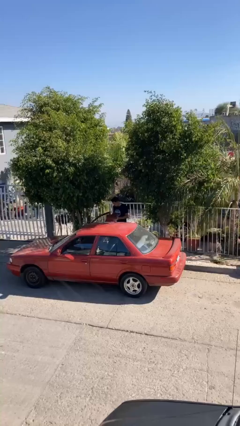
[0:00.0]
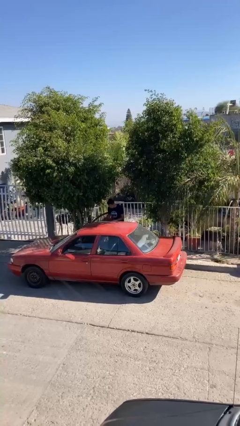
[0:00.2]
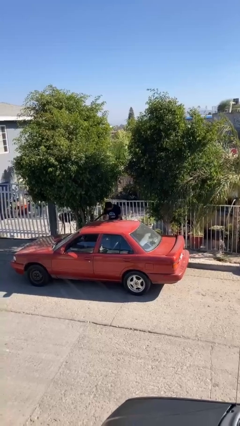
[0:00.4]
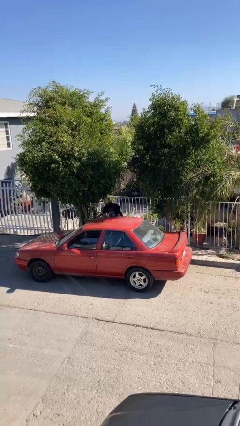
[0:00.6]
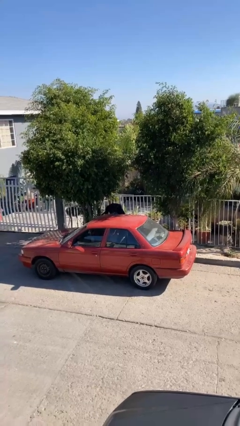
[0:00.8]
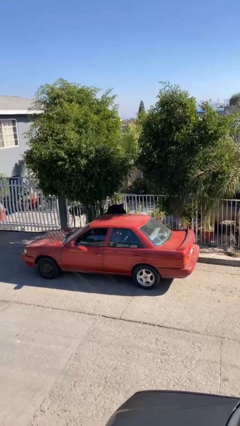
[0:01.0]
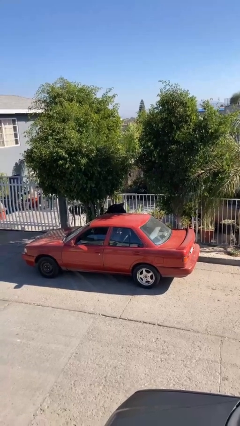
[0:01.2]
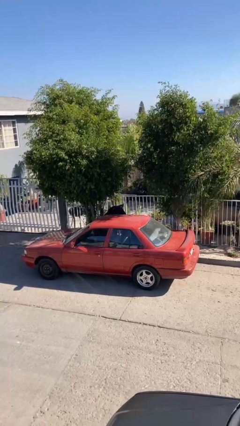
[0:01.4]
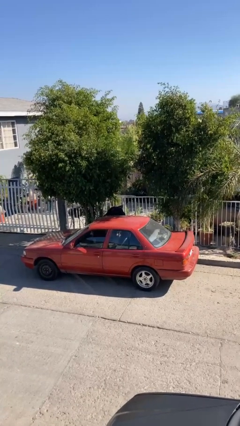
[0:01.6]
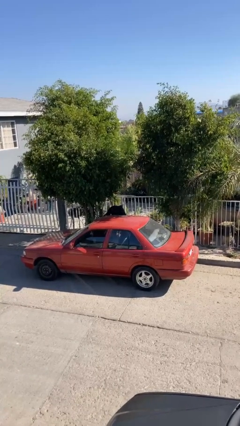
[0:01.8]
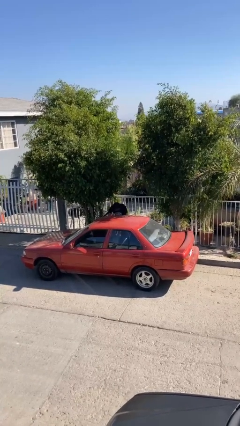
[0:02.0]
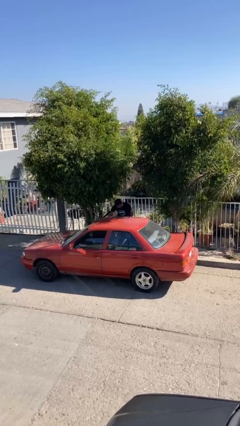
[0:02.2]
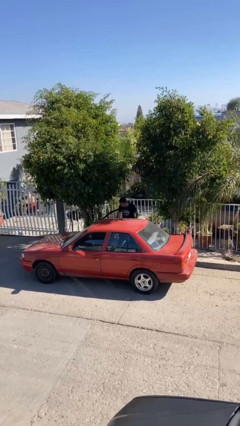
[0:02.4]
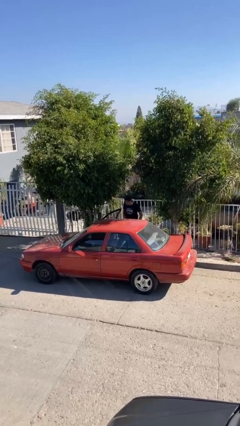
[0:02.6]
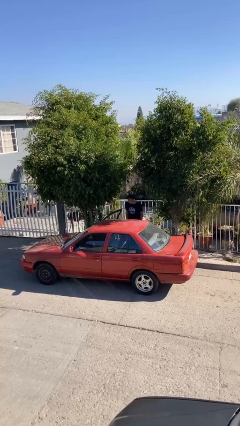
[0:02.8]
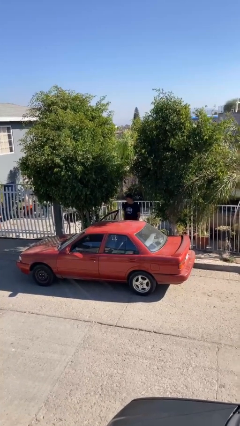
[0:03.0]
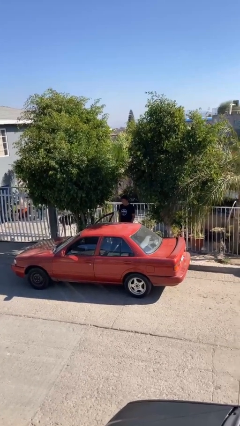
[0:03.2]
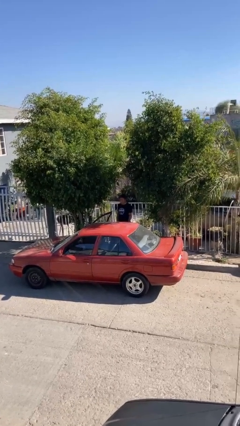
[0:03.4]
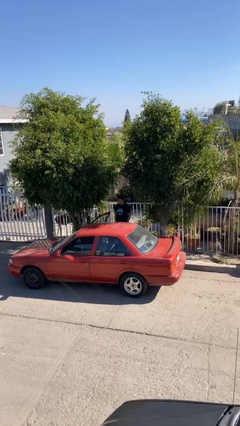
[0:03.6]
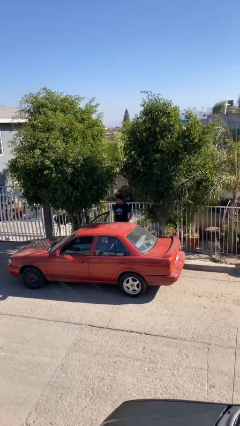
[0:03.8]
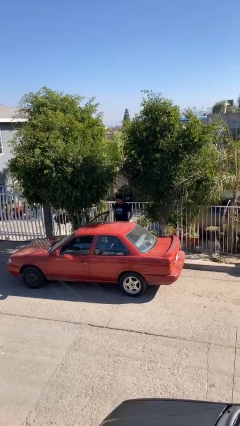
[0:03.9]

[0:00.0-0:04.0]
person loads car

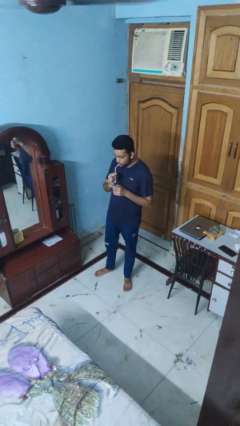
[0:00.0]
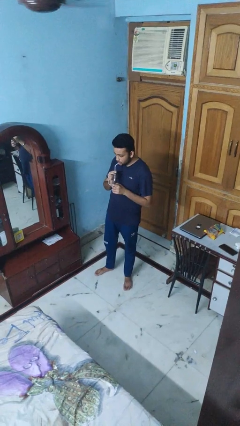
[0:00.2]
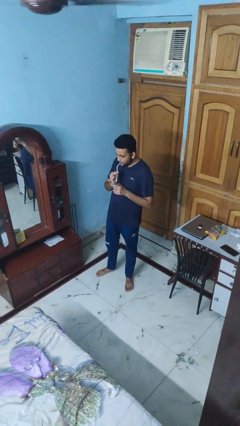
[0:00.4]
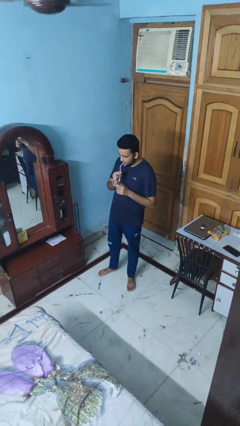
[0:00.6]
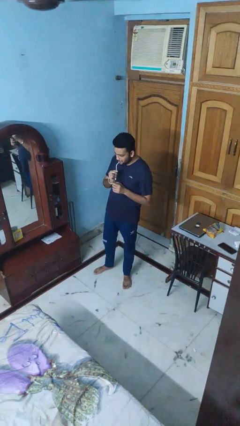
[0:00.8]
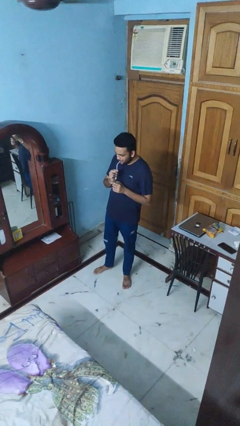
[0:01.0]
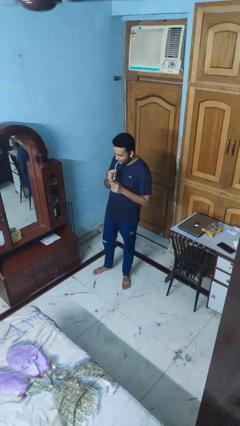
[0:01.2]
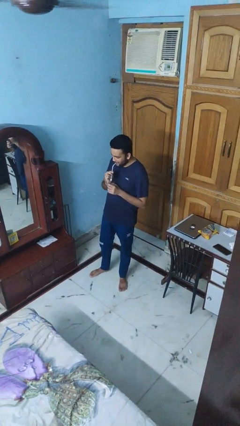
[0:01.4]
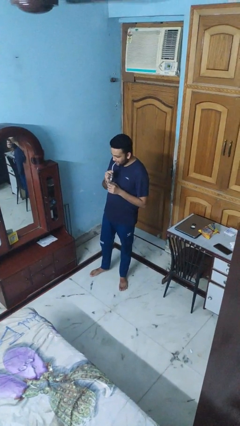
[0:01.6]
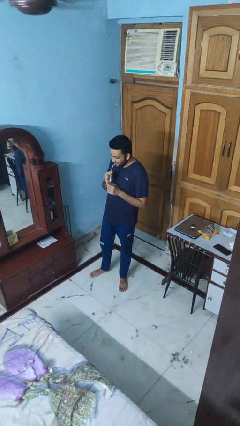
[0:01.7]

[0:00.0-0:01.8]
person drinks from straw

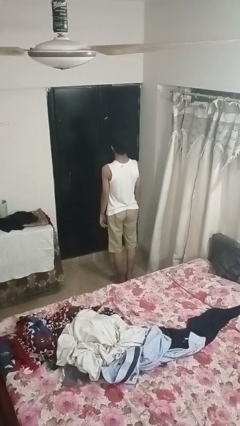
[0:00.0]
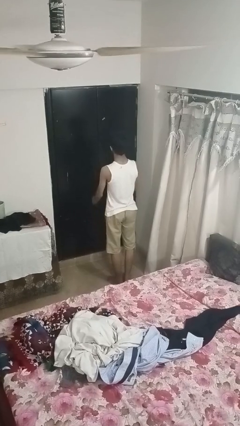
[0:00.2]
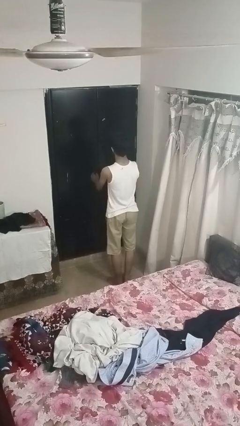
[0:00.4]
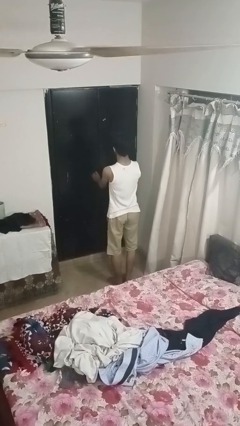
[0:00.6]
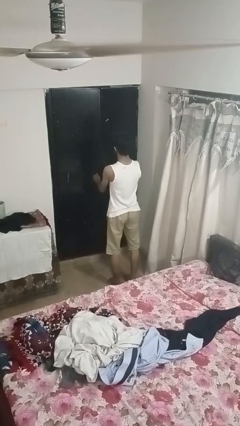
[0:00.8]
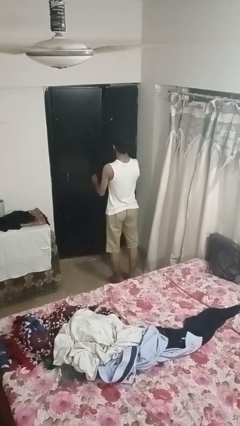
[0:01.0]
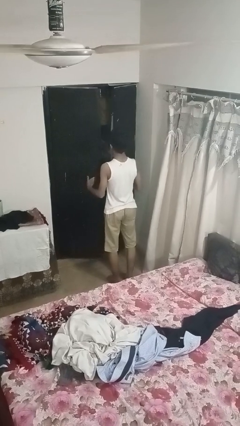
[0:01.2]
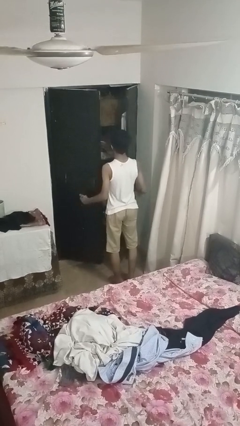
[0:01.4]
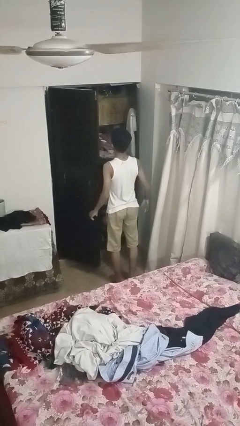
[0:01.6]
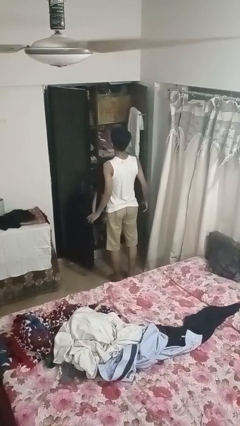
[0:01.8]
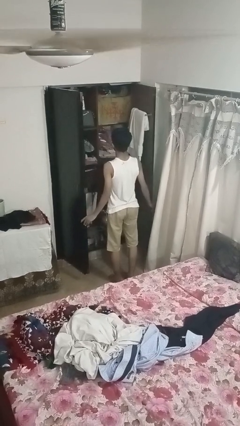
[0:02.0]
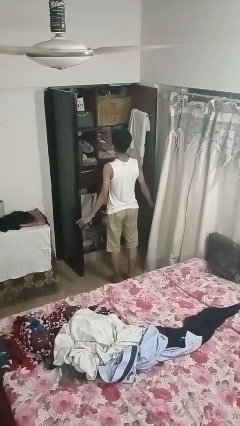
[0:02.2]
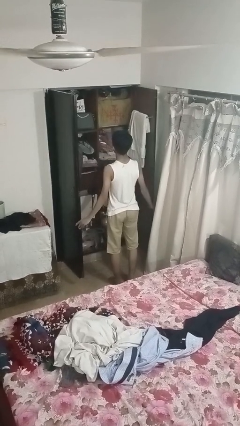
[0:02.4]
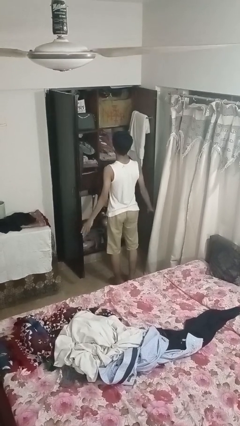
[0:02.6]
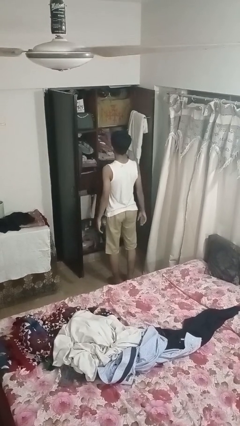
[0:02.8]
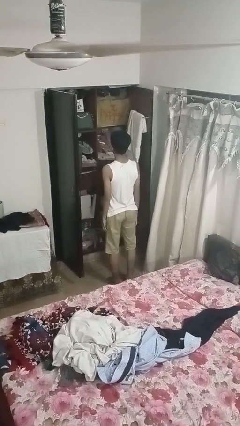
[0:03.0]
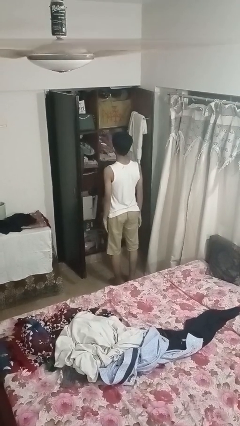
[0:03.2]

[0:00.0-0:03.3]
person opens closet door

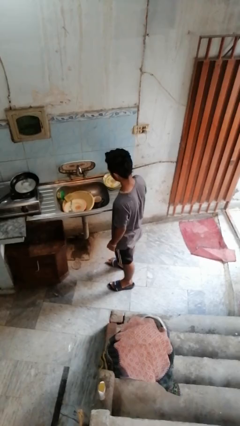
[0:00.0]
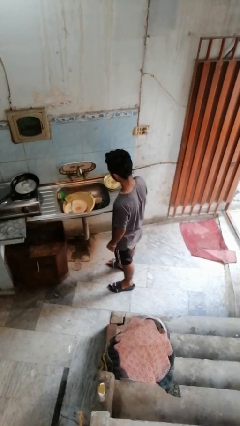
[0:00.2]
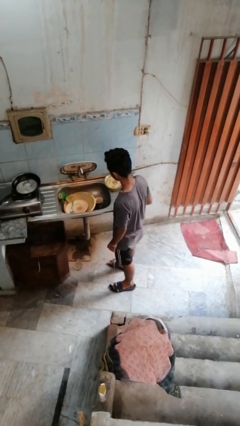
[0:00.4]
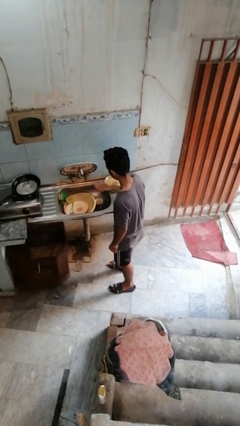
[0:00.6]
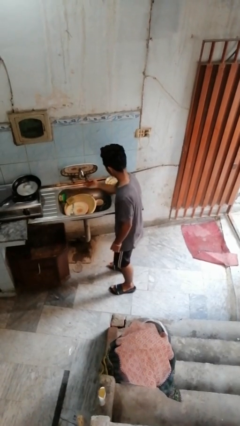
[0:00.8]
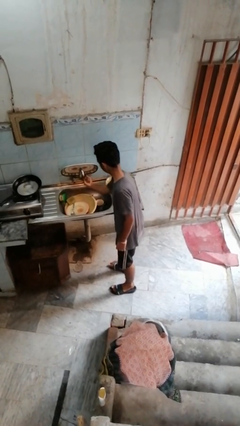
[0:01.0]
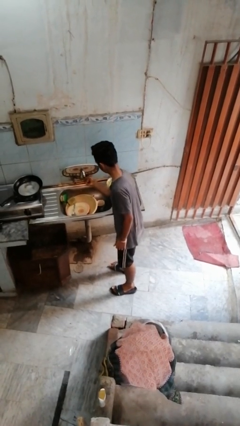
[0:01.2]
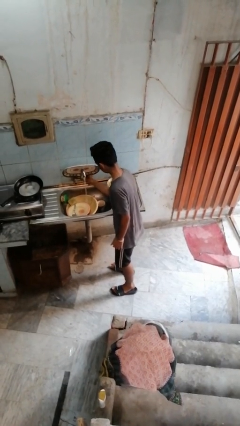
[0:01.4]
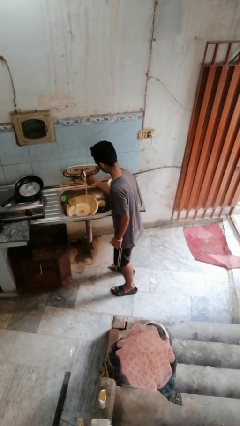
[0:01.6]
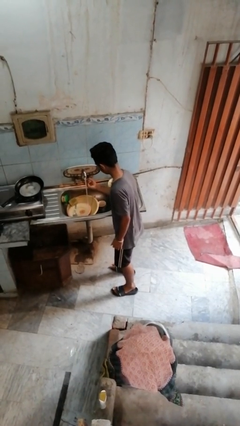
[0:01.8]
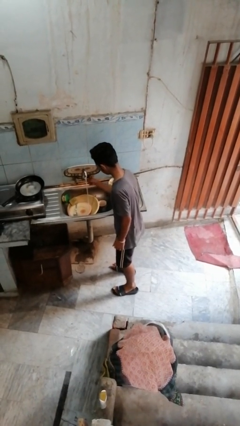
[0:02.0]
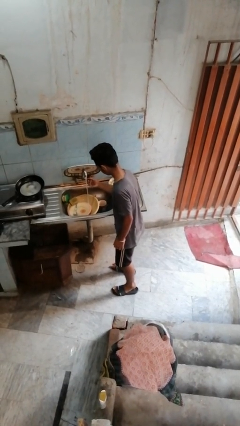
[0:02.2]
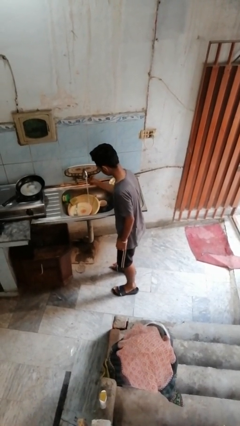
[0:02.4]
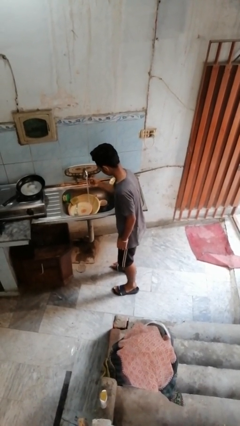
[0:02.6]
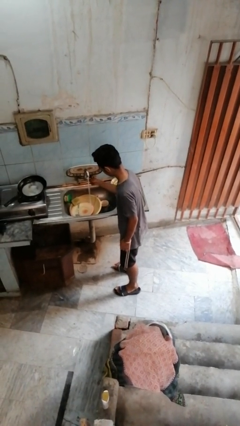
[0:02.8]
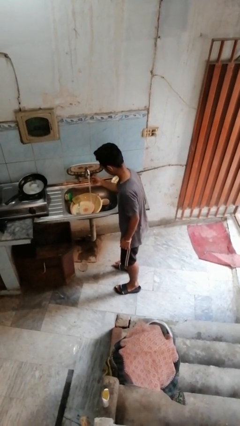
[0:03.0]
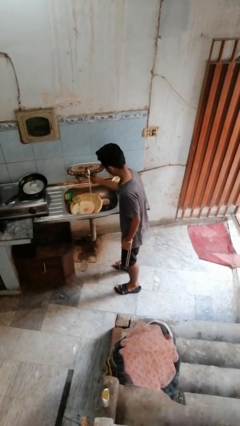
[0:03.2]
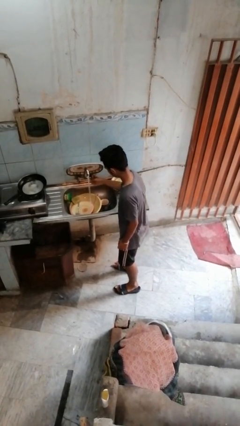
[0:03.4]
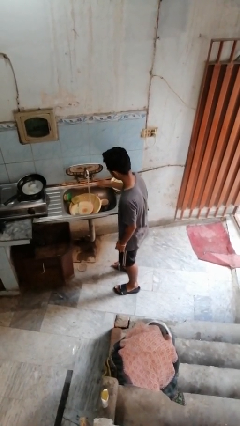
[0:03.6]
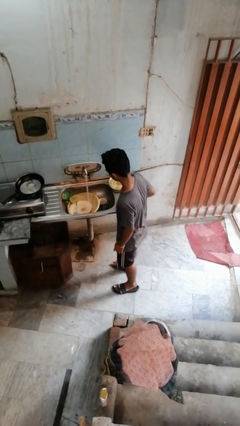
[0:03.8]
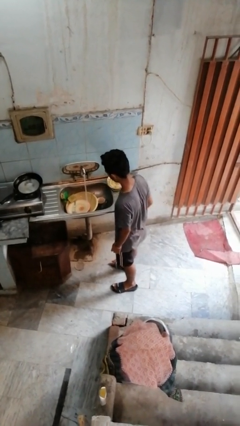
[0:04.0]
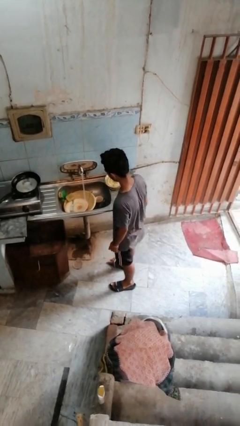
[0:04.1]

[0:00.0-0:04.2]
person turns on faucet

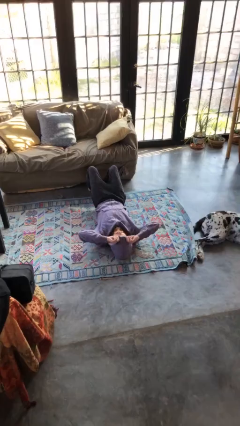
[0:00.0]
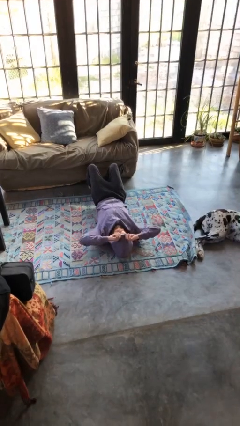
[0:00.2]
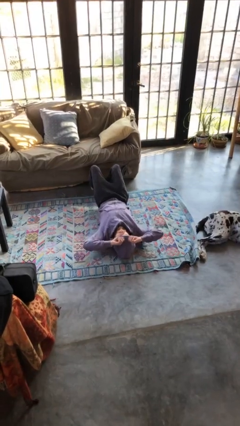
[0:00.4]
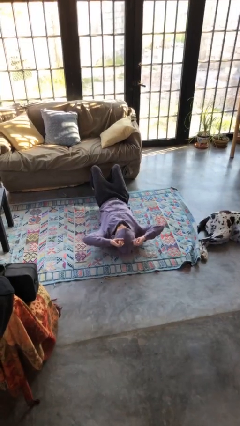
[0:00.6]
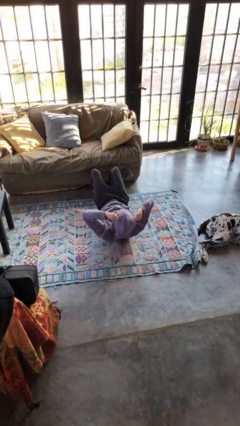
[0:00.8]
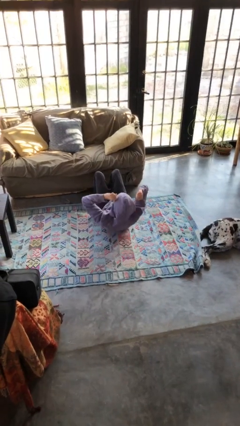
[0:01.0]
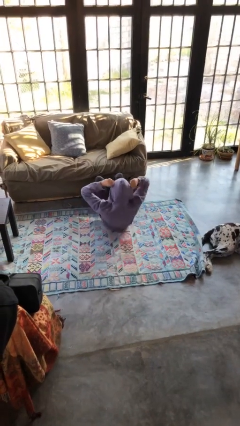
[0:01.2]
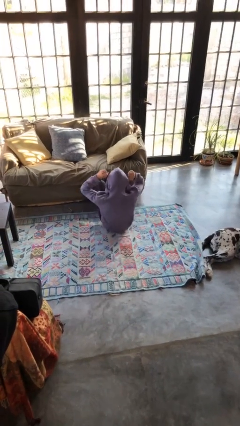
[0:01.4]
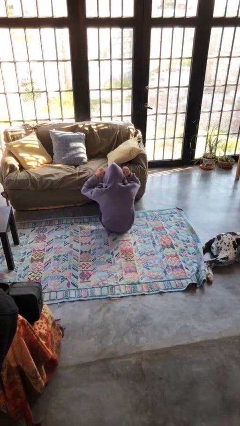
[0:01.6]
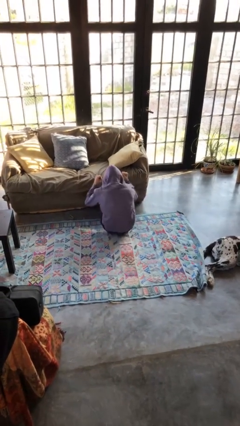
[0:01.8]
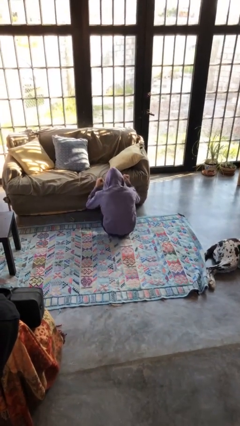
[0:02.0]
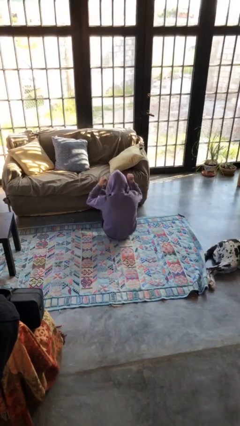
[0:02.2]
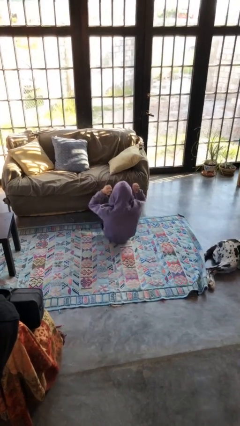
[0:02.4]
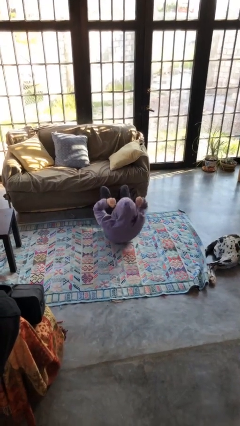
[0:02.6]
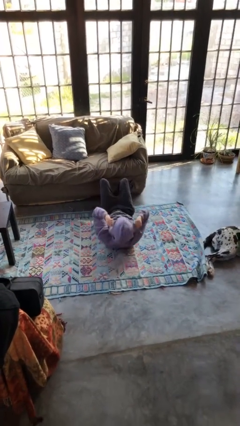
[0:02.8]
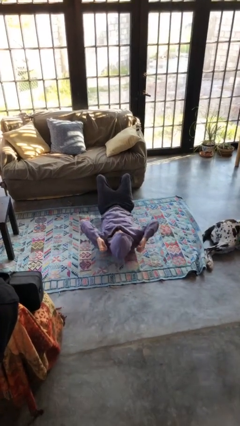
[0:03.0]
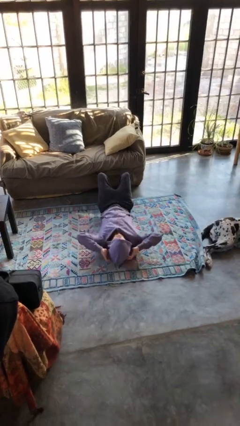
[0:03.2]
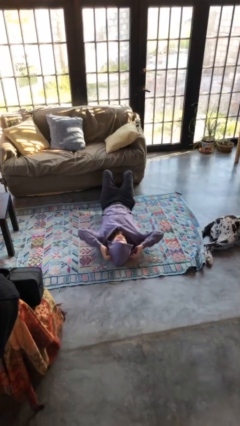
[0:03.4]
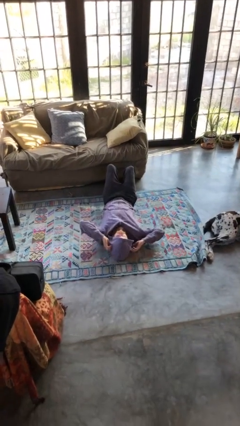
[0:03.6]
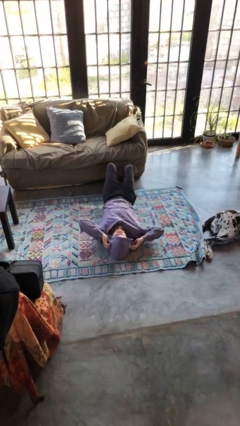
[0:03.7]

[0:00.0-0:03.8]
person exercises with situp

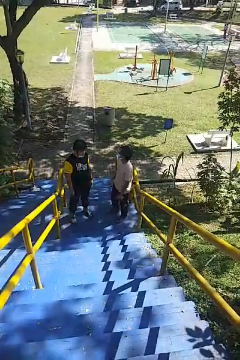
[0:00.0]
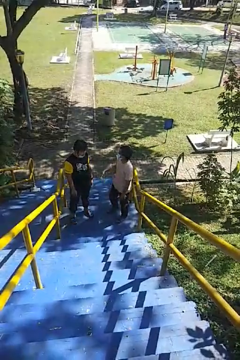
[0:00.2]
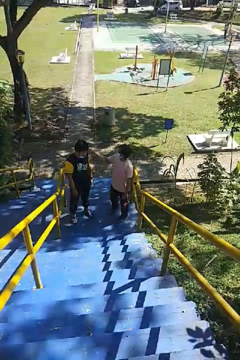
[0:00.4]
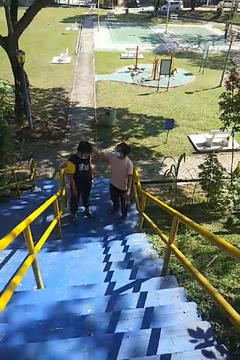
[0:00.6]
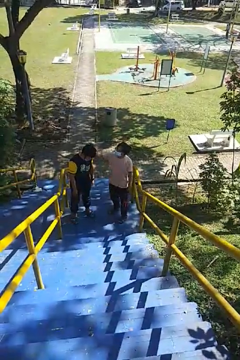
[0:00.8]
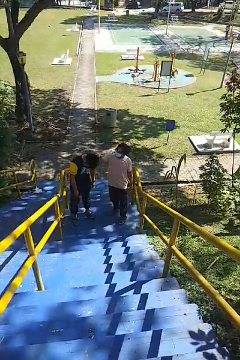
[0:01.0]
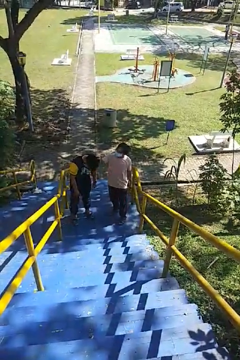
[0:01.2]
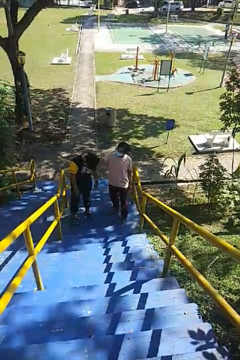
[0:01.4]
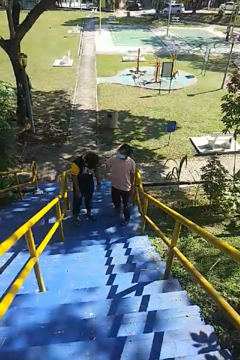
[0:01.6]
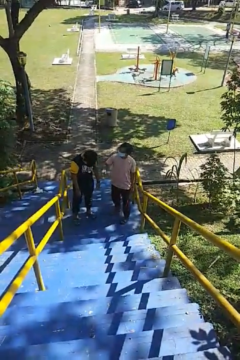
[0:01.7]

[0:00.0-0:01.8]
person grabs person by hair